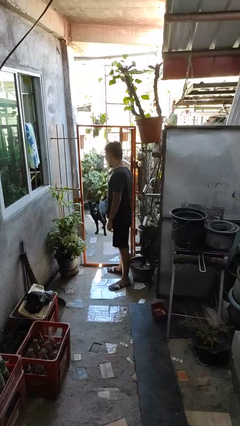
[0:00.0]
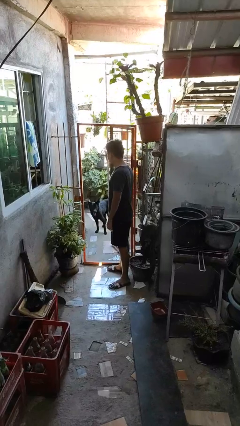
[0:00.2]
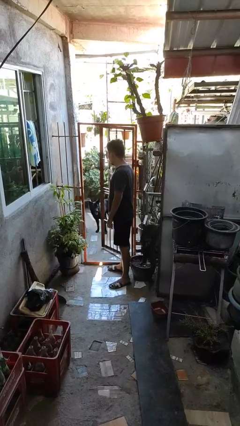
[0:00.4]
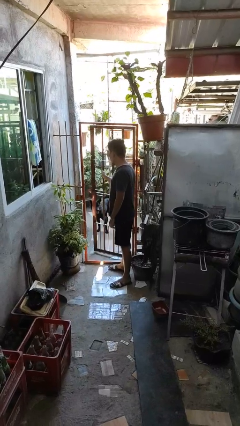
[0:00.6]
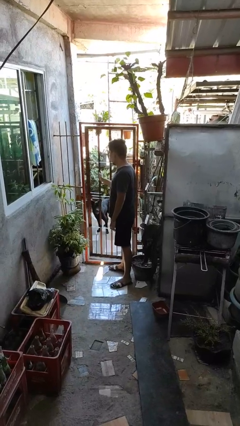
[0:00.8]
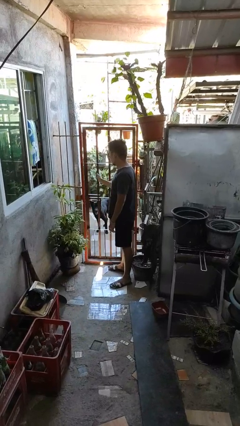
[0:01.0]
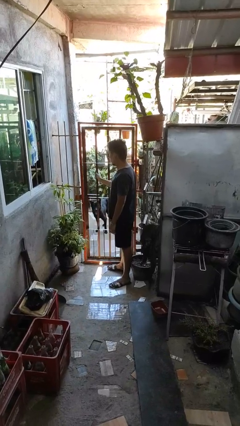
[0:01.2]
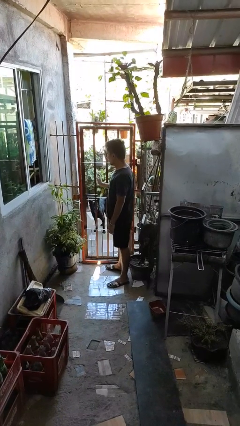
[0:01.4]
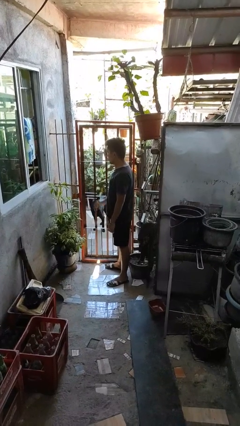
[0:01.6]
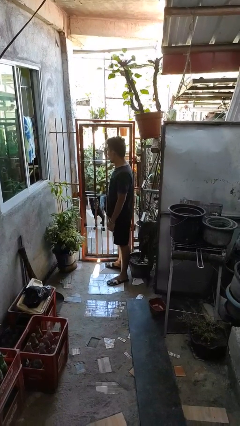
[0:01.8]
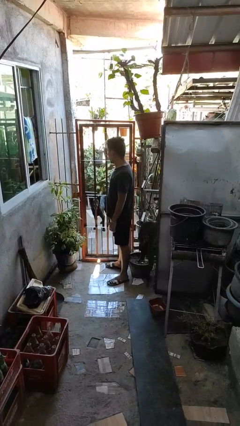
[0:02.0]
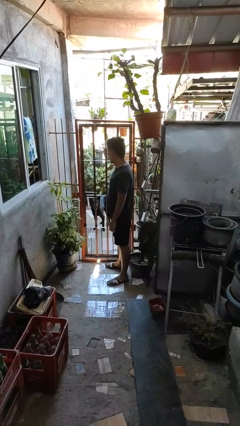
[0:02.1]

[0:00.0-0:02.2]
person closes gate

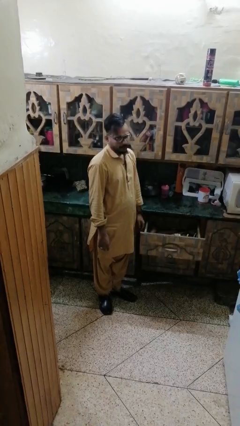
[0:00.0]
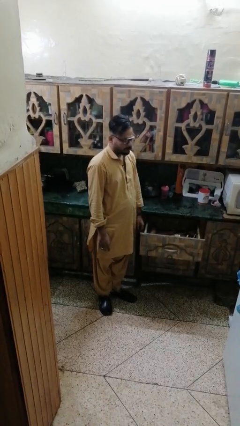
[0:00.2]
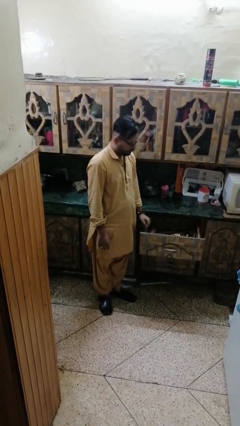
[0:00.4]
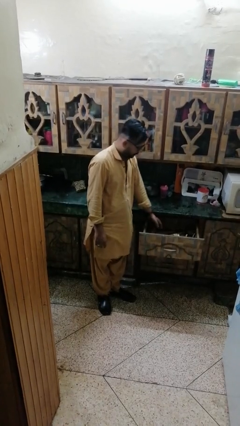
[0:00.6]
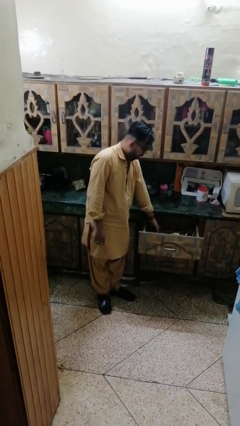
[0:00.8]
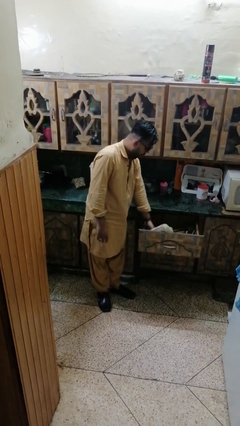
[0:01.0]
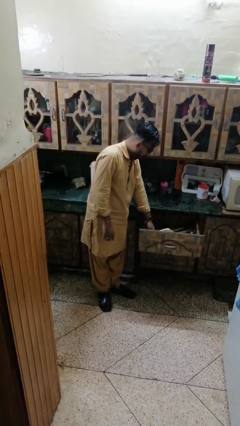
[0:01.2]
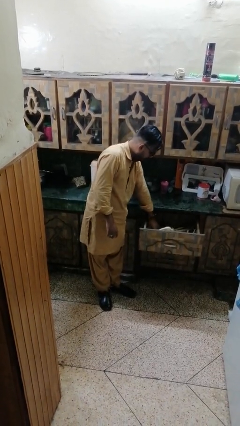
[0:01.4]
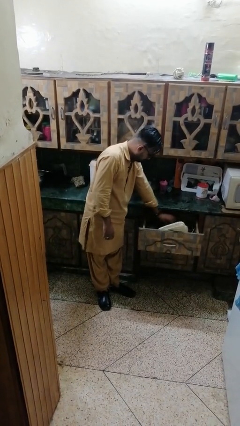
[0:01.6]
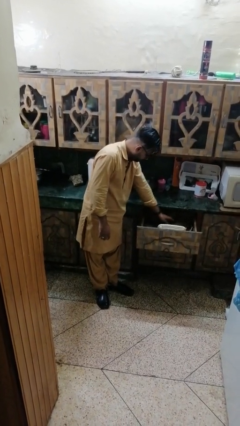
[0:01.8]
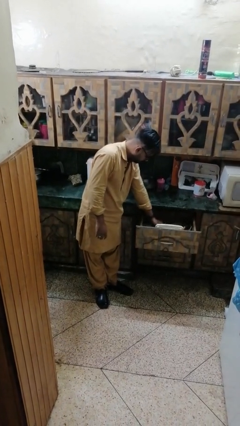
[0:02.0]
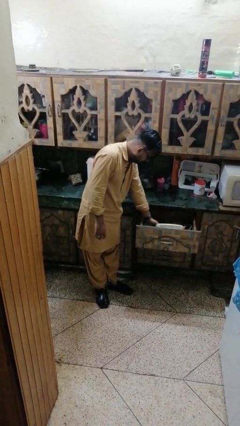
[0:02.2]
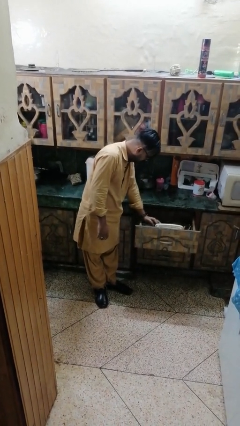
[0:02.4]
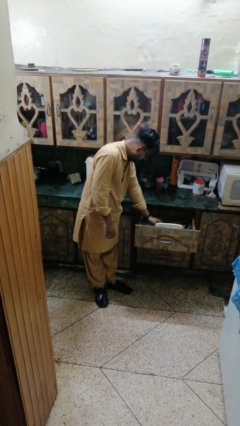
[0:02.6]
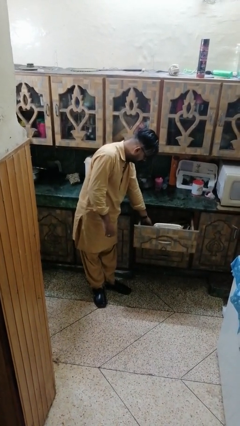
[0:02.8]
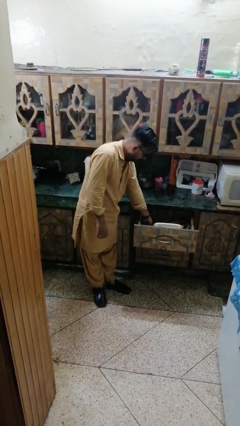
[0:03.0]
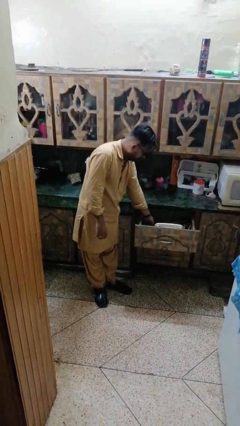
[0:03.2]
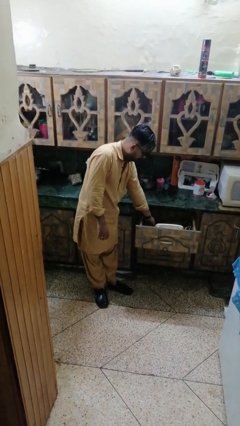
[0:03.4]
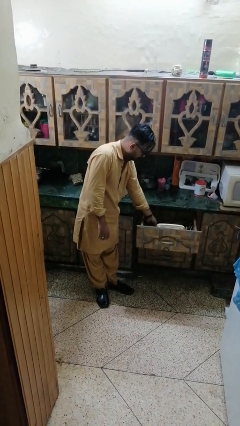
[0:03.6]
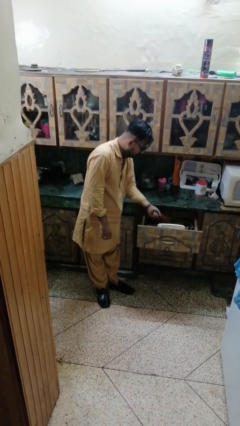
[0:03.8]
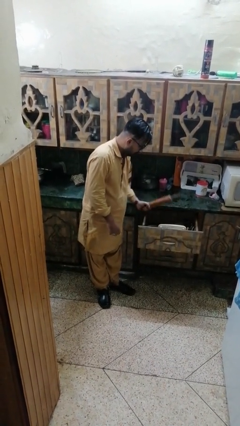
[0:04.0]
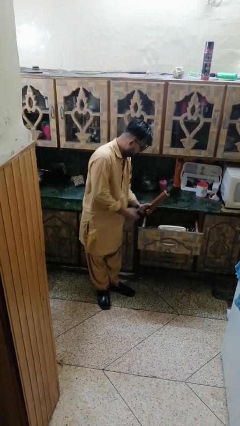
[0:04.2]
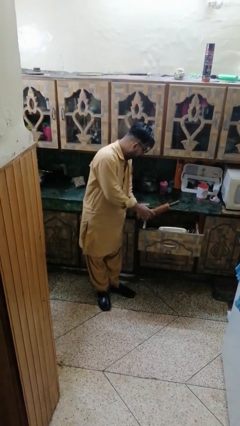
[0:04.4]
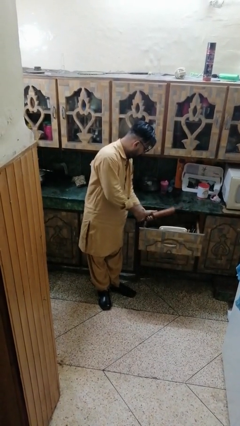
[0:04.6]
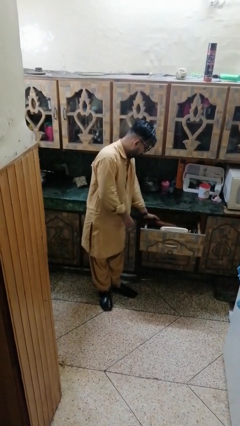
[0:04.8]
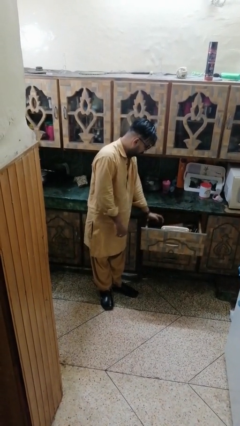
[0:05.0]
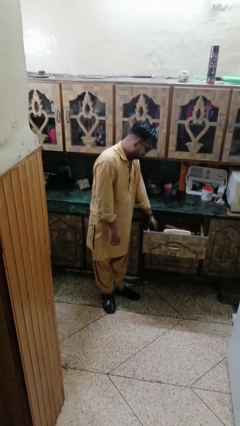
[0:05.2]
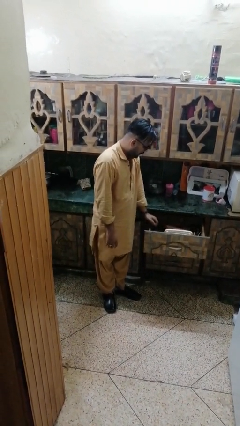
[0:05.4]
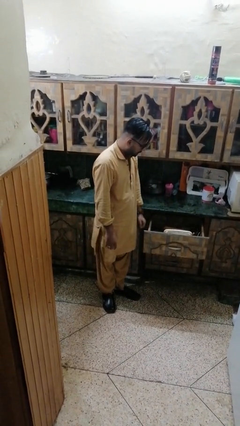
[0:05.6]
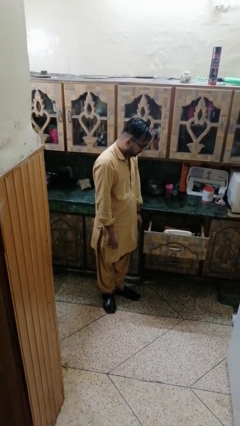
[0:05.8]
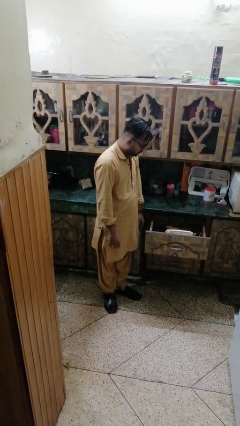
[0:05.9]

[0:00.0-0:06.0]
person searches in kitchen drawer

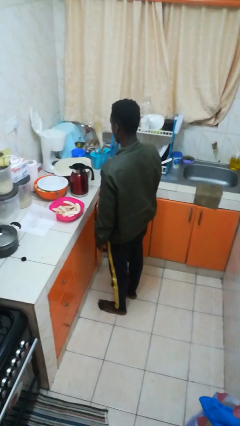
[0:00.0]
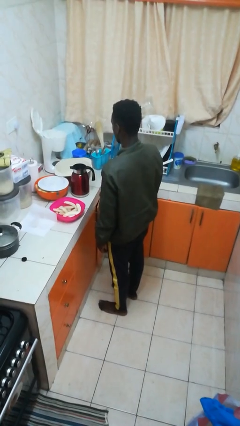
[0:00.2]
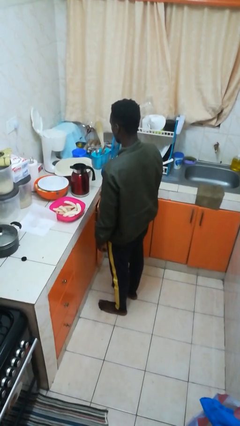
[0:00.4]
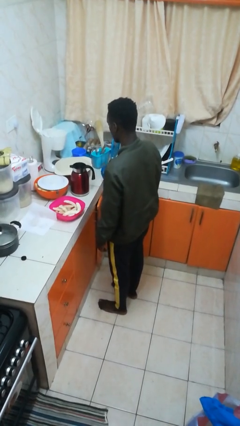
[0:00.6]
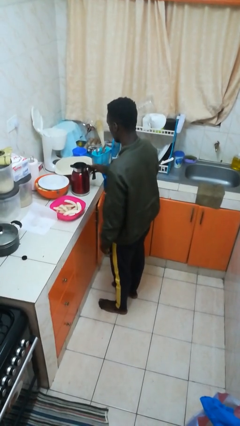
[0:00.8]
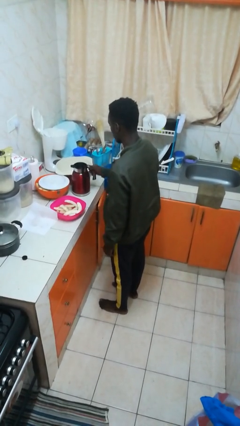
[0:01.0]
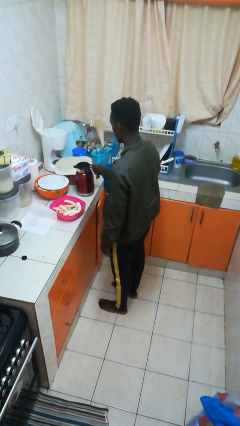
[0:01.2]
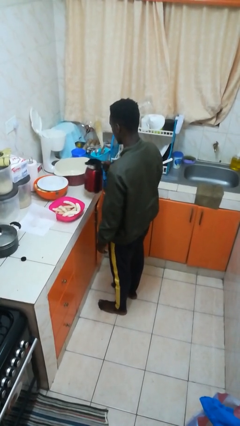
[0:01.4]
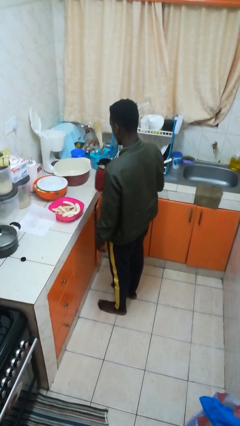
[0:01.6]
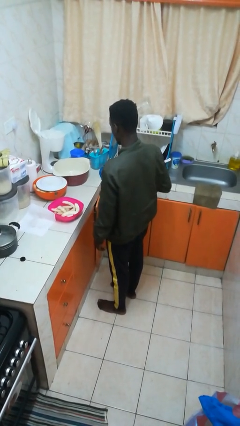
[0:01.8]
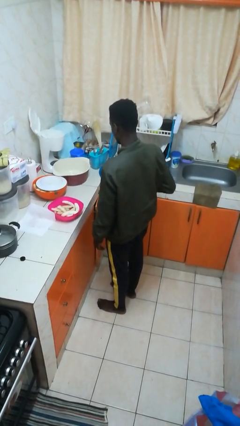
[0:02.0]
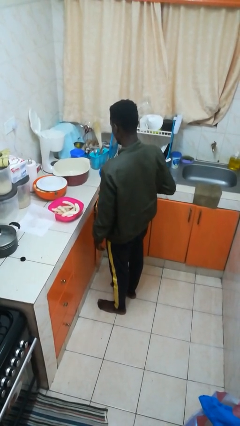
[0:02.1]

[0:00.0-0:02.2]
person picks up object from countertop

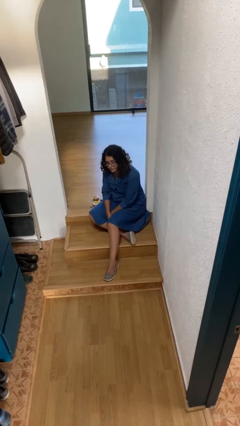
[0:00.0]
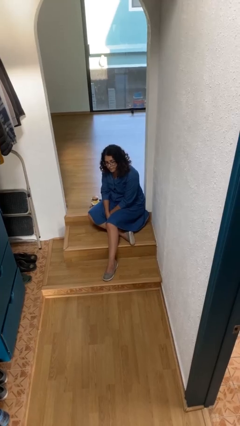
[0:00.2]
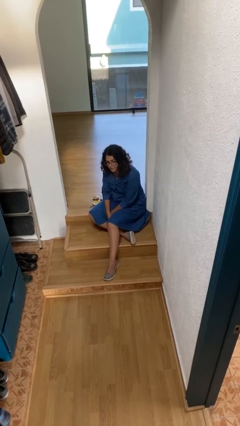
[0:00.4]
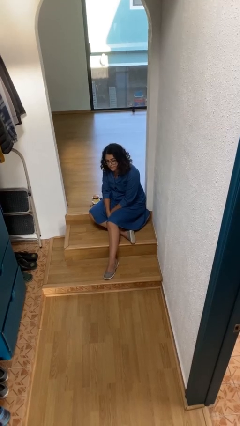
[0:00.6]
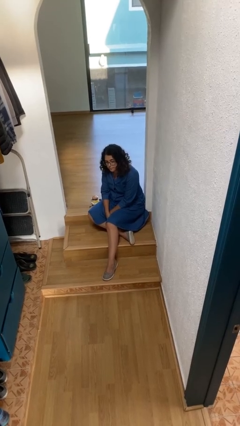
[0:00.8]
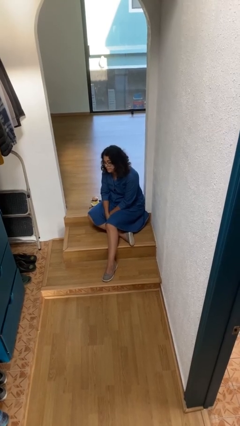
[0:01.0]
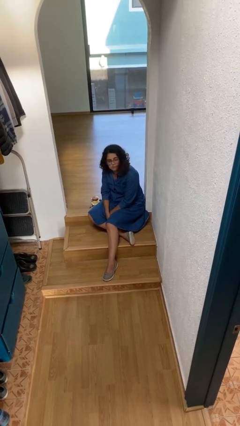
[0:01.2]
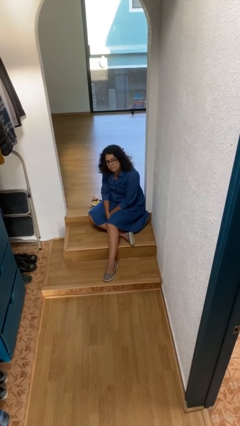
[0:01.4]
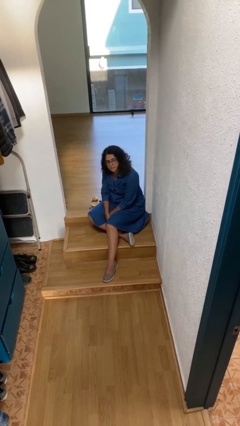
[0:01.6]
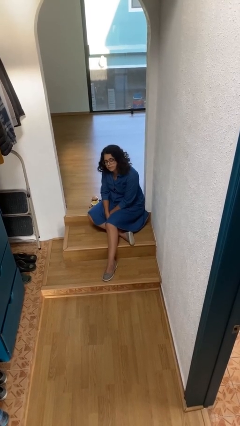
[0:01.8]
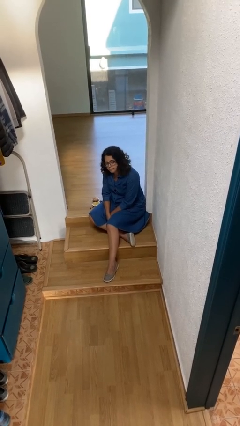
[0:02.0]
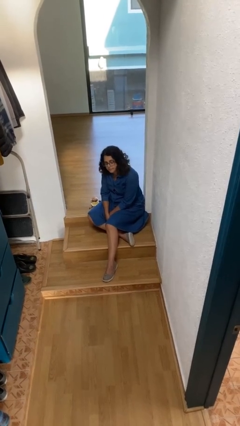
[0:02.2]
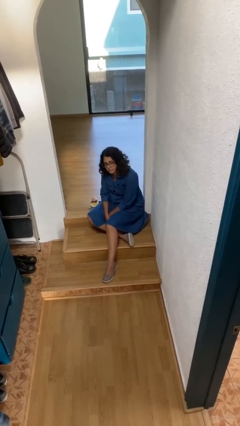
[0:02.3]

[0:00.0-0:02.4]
person shakes head

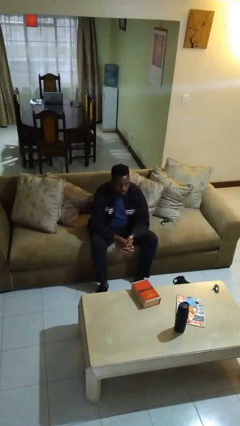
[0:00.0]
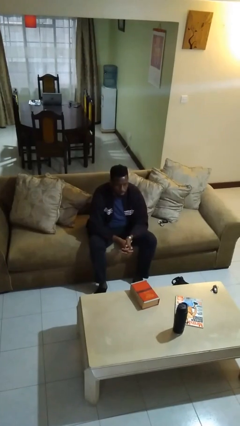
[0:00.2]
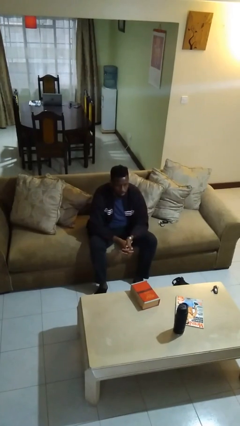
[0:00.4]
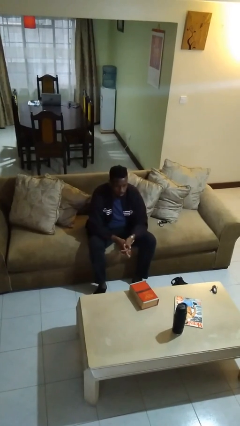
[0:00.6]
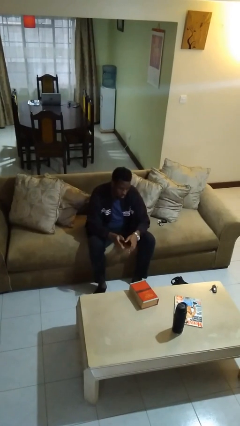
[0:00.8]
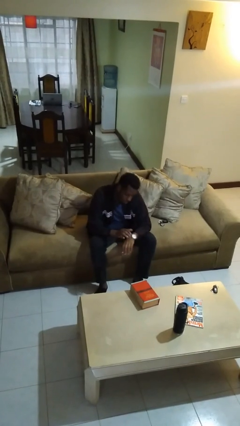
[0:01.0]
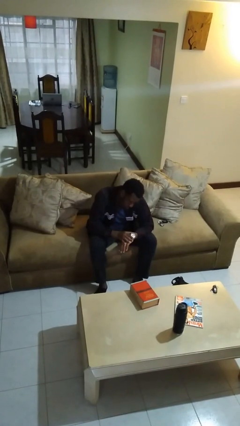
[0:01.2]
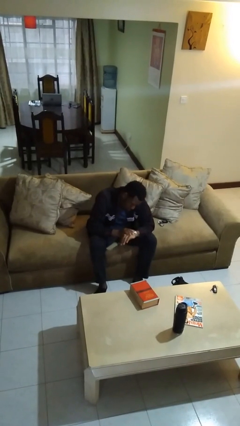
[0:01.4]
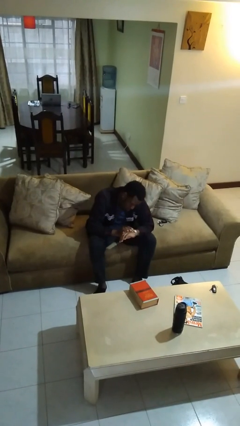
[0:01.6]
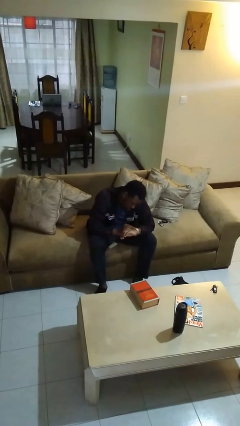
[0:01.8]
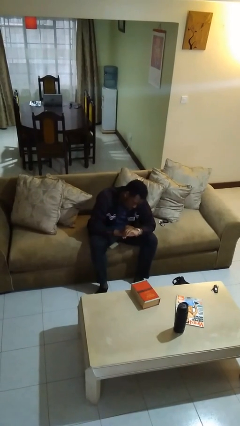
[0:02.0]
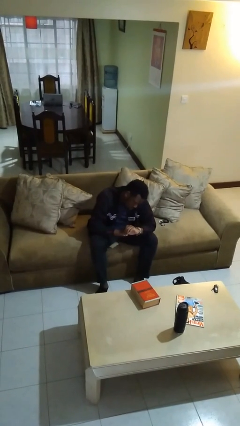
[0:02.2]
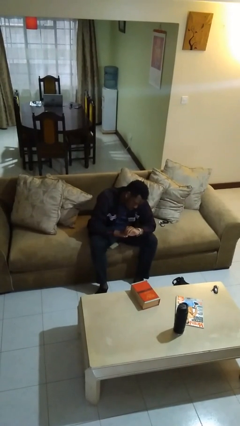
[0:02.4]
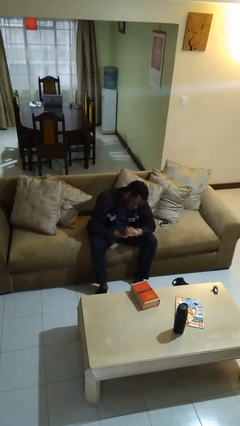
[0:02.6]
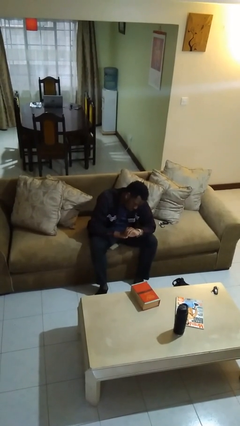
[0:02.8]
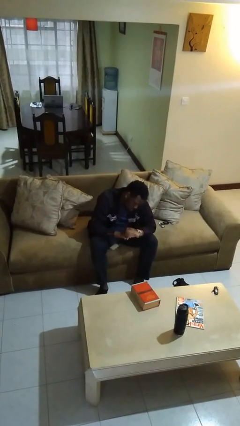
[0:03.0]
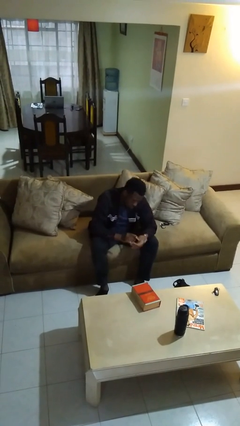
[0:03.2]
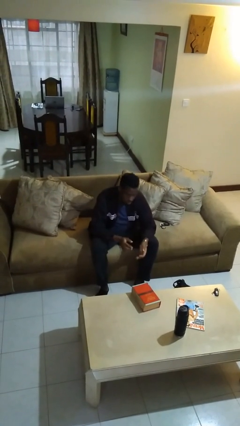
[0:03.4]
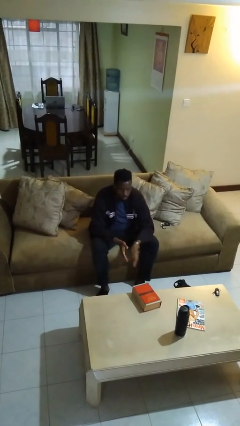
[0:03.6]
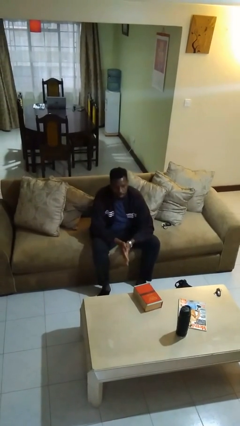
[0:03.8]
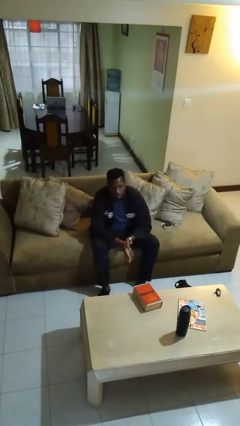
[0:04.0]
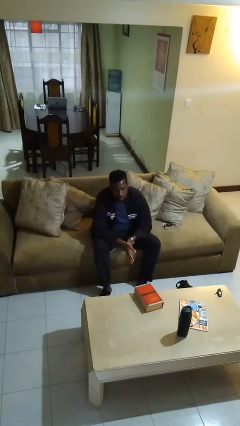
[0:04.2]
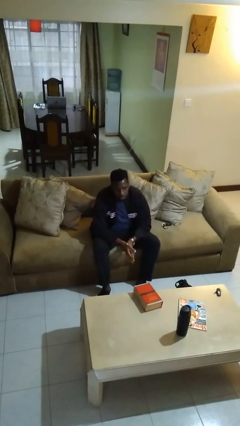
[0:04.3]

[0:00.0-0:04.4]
person looks at wristwatch

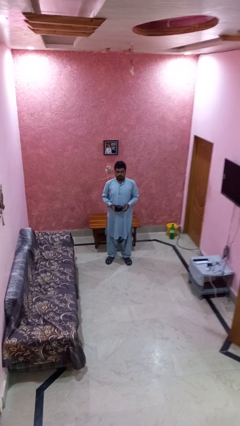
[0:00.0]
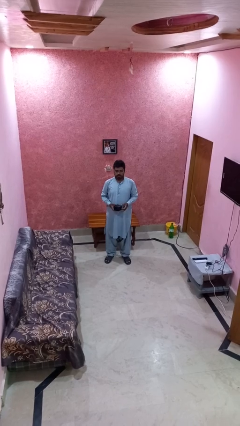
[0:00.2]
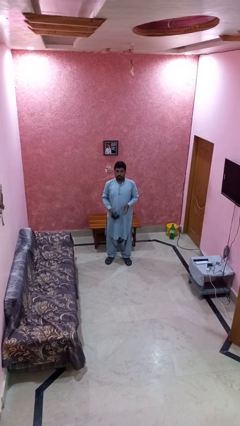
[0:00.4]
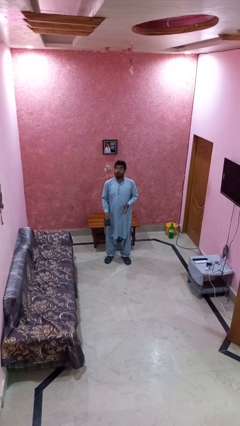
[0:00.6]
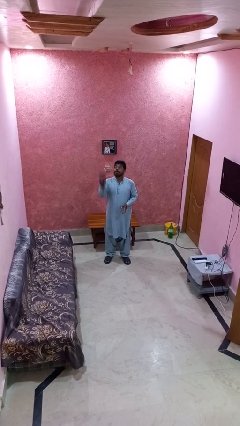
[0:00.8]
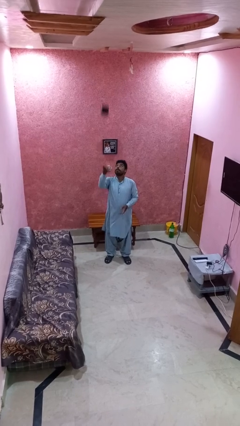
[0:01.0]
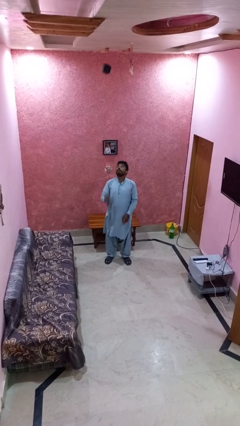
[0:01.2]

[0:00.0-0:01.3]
person drops object
